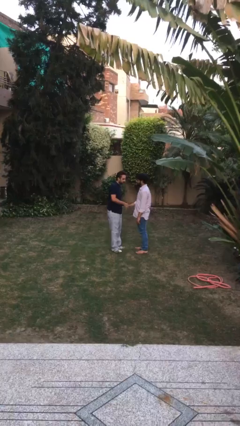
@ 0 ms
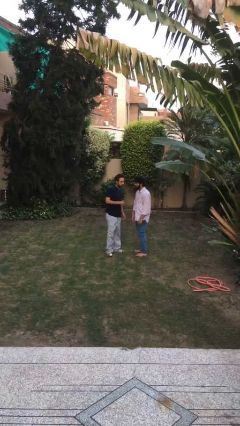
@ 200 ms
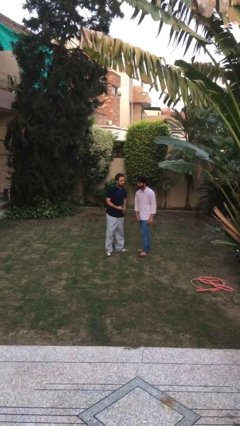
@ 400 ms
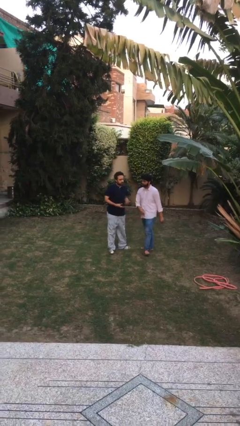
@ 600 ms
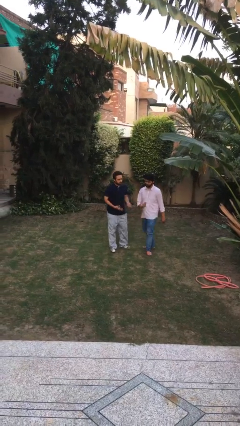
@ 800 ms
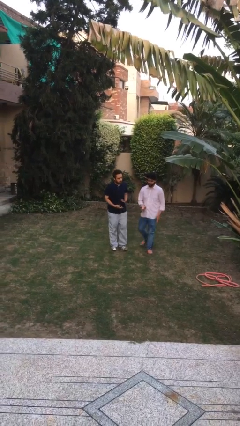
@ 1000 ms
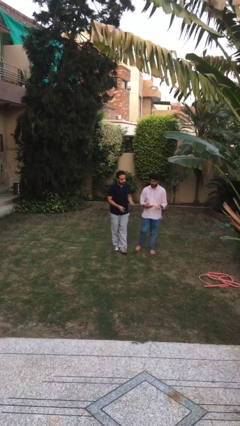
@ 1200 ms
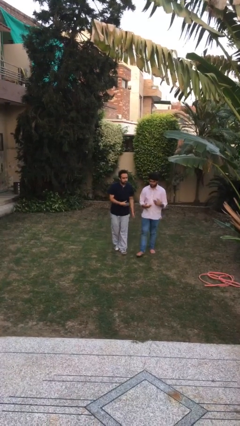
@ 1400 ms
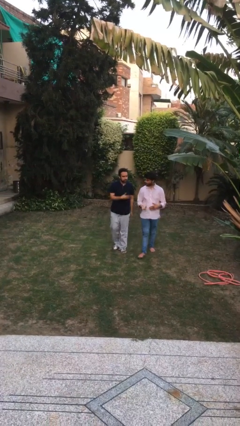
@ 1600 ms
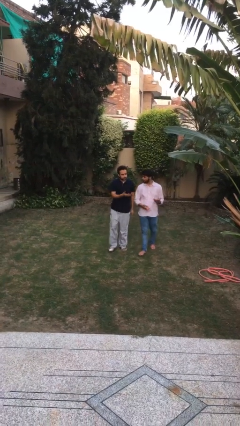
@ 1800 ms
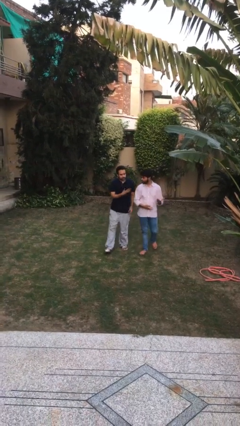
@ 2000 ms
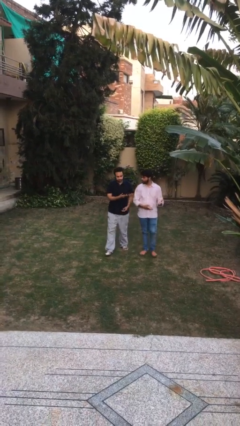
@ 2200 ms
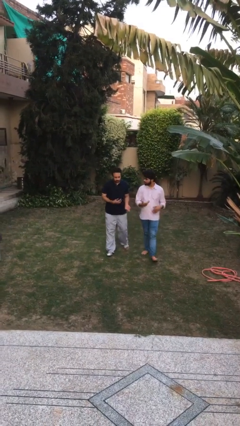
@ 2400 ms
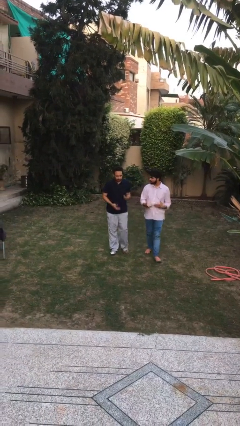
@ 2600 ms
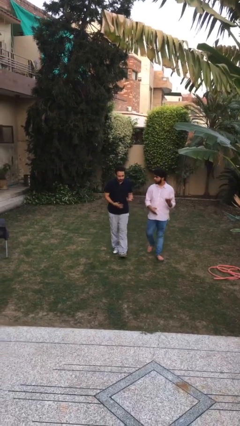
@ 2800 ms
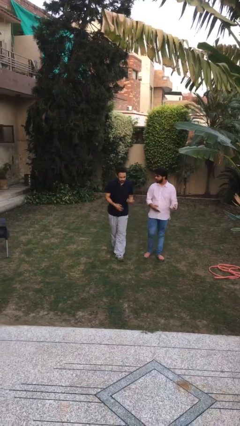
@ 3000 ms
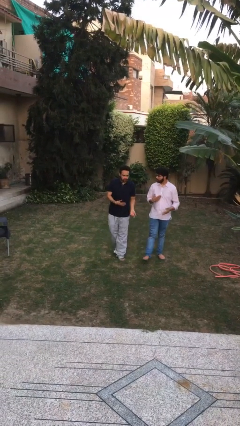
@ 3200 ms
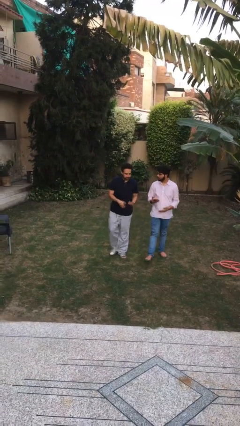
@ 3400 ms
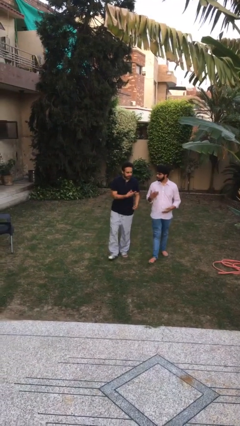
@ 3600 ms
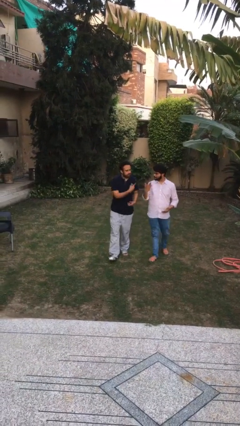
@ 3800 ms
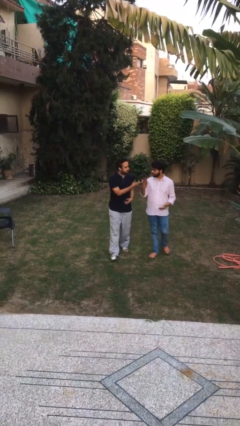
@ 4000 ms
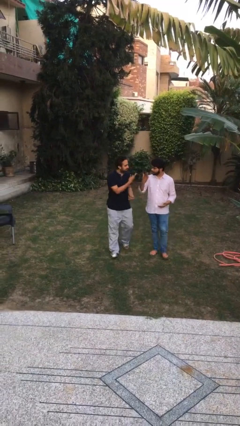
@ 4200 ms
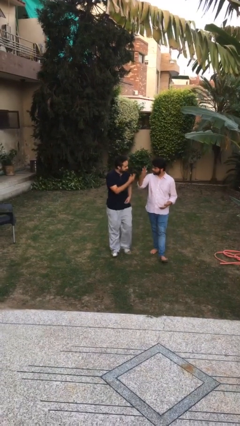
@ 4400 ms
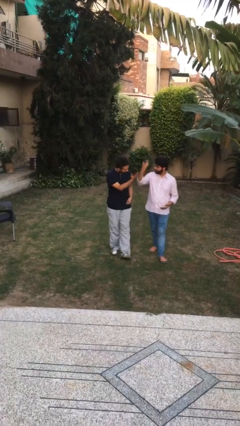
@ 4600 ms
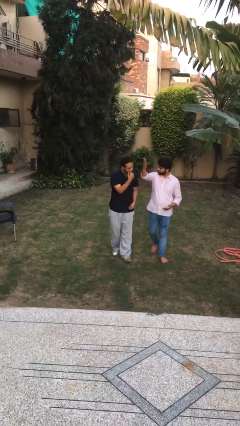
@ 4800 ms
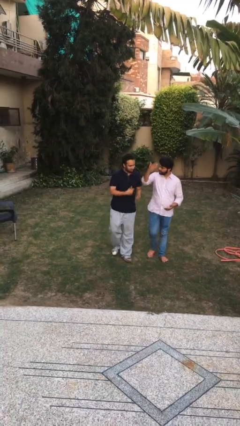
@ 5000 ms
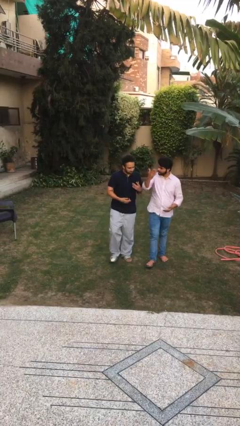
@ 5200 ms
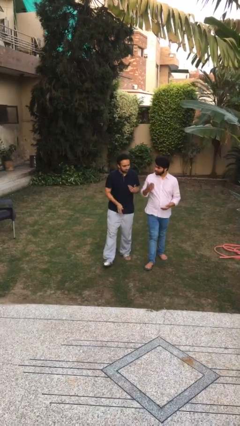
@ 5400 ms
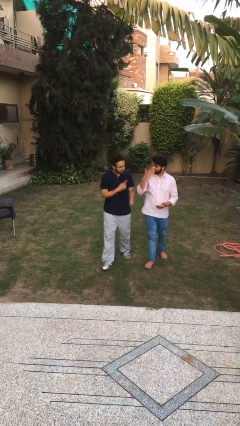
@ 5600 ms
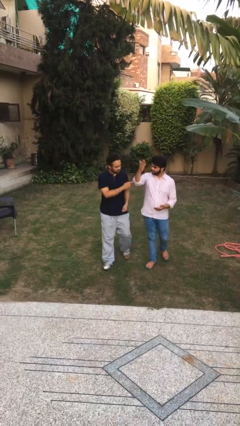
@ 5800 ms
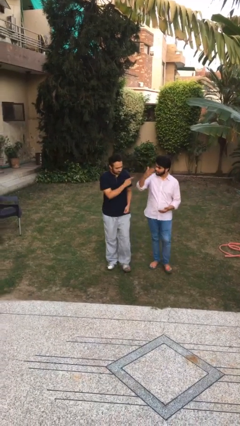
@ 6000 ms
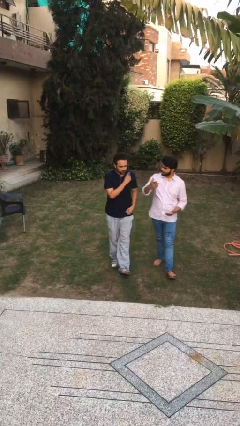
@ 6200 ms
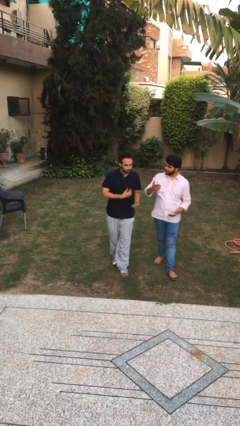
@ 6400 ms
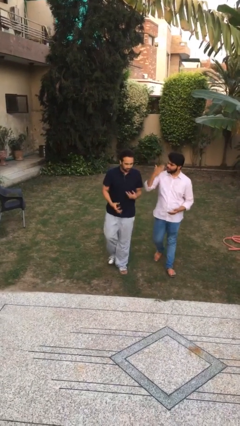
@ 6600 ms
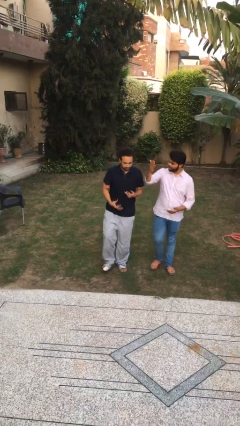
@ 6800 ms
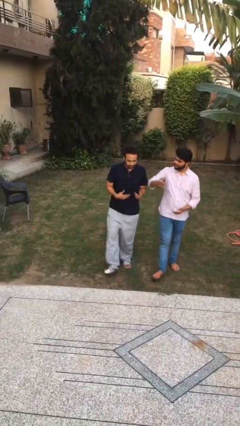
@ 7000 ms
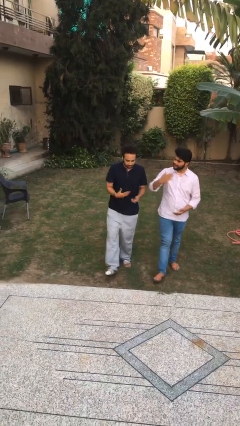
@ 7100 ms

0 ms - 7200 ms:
person talks to person

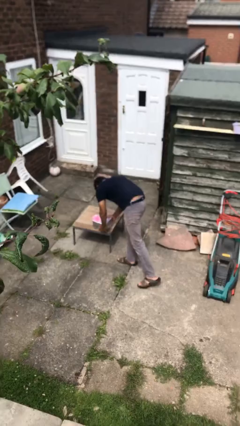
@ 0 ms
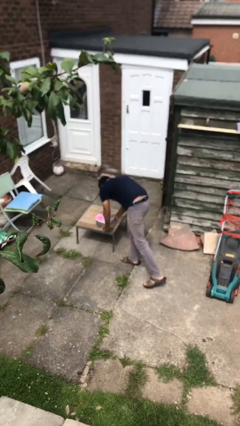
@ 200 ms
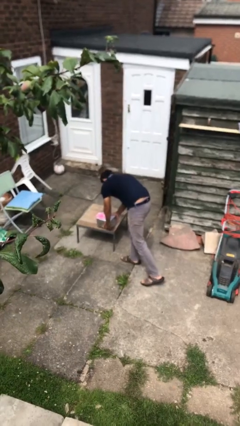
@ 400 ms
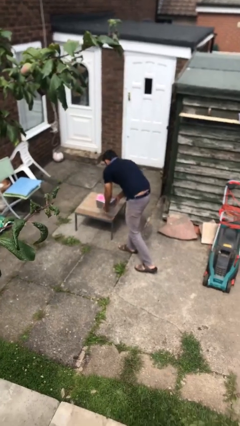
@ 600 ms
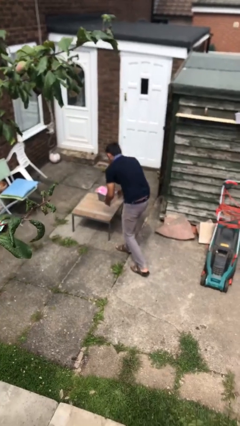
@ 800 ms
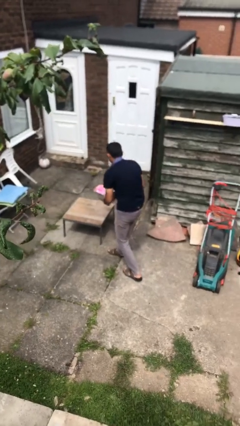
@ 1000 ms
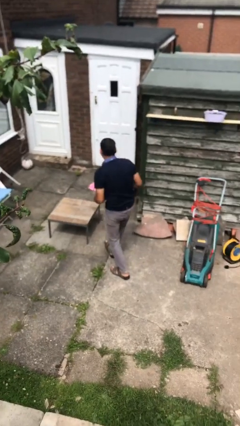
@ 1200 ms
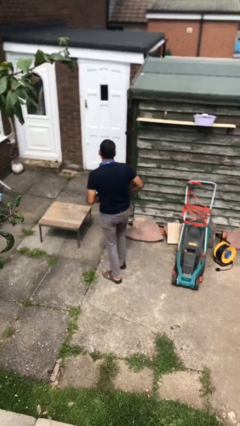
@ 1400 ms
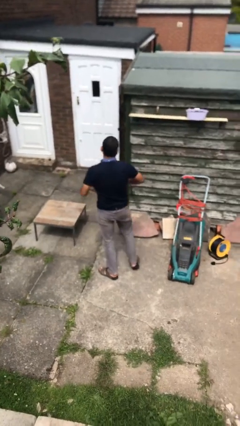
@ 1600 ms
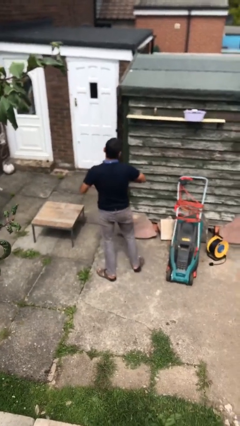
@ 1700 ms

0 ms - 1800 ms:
person picks up object from table

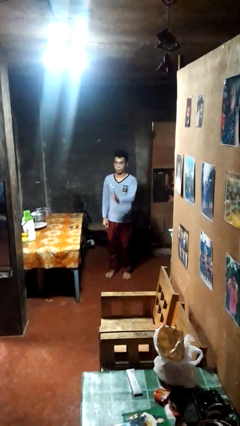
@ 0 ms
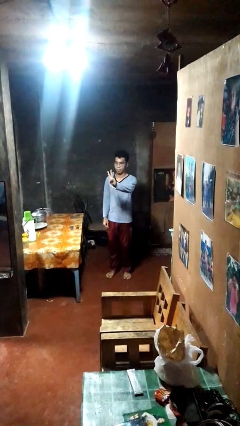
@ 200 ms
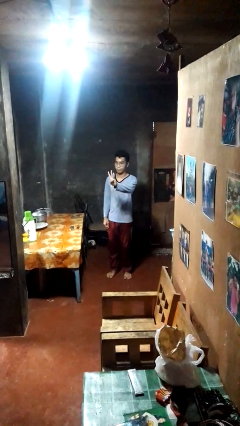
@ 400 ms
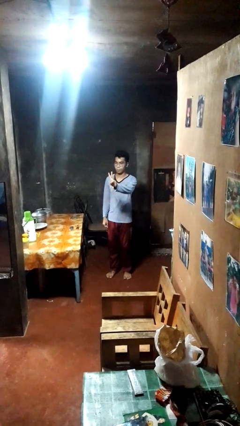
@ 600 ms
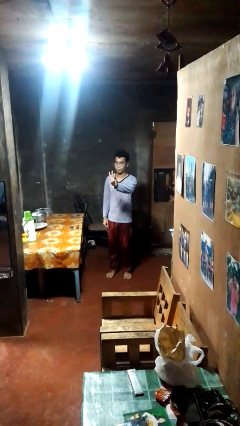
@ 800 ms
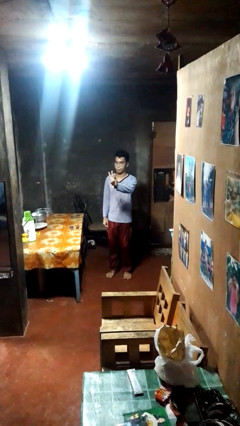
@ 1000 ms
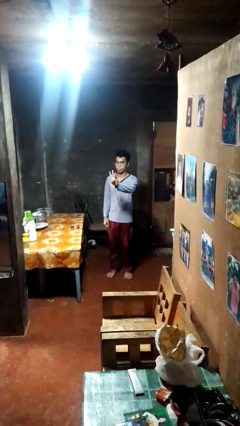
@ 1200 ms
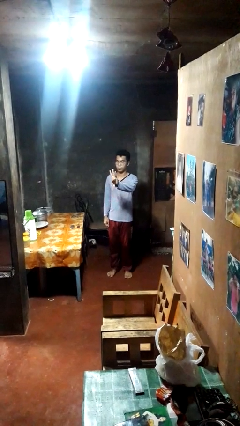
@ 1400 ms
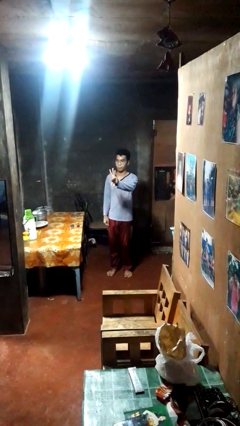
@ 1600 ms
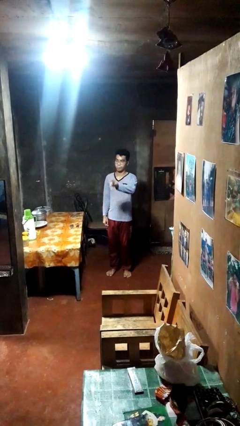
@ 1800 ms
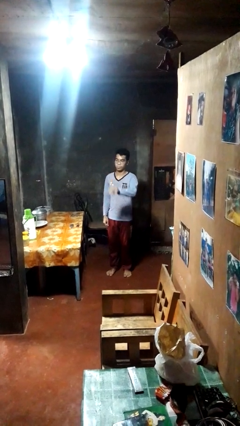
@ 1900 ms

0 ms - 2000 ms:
person gestures number three

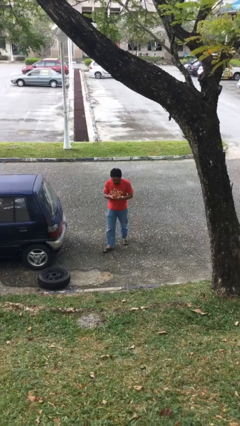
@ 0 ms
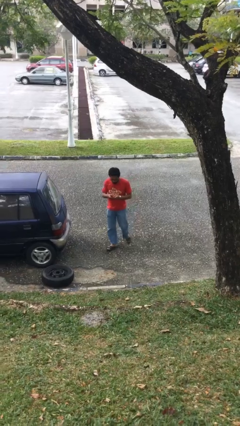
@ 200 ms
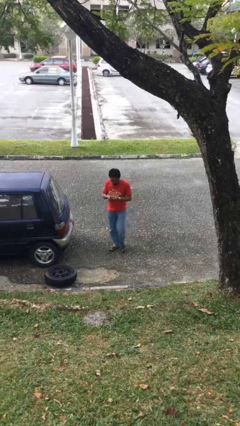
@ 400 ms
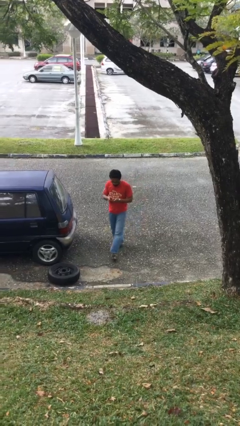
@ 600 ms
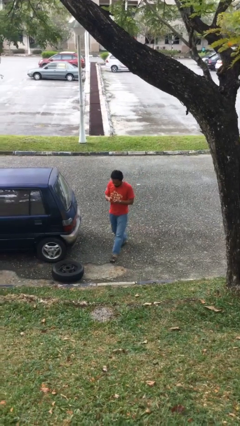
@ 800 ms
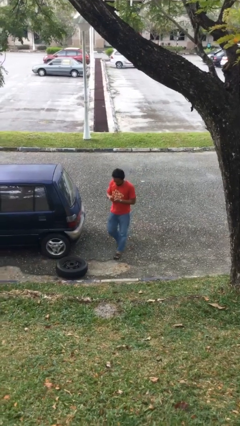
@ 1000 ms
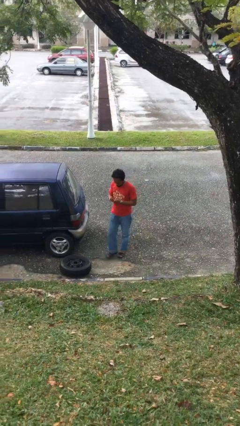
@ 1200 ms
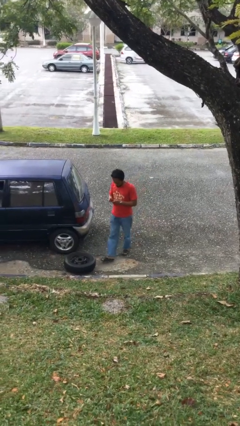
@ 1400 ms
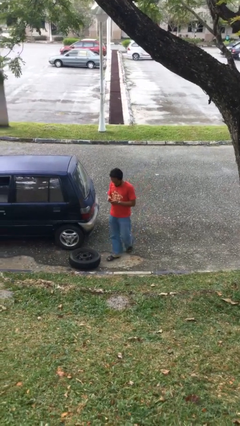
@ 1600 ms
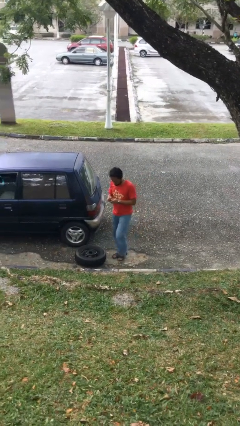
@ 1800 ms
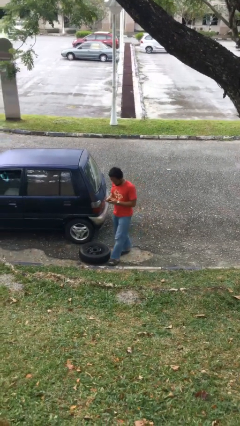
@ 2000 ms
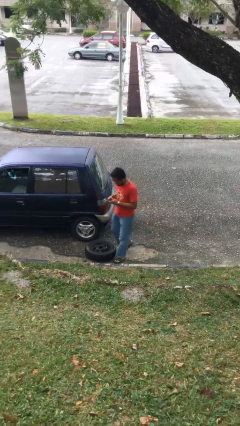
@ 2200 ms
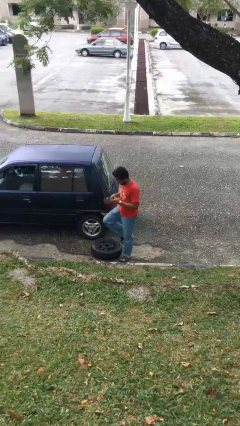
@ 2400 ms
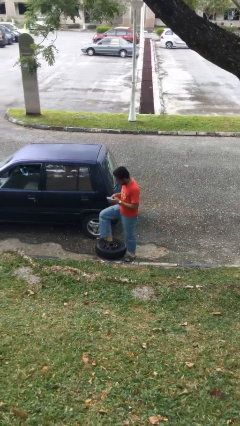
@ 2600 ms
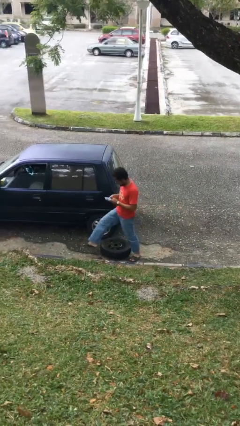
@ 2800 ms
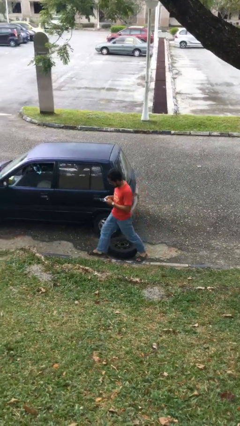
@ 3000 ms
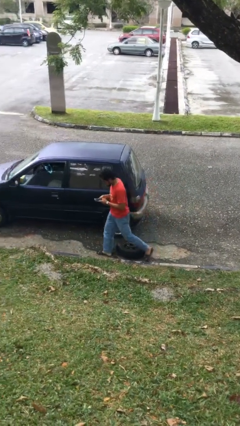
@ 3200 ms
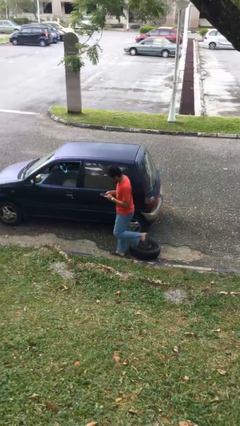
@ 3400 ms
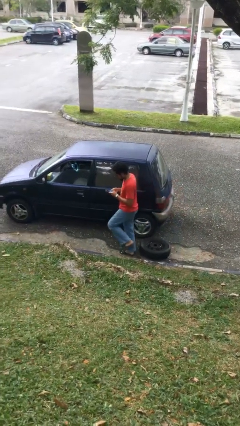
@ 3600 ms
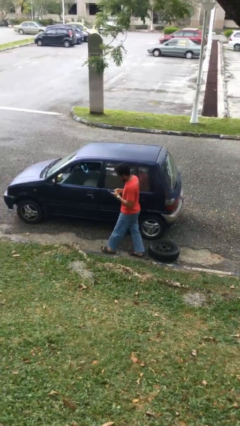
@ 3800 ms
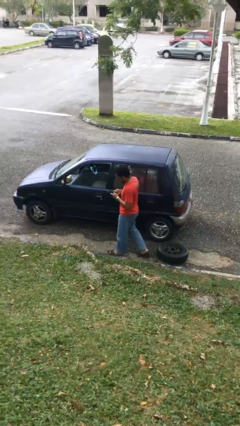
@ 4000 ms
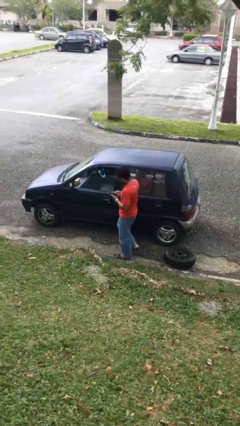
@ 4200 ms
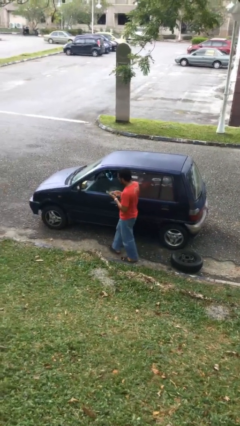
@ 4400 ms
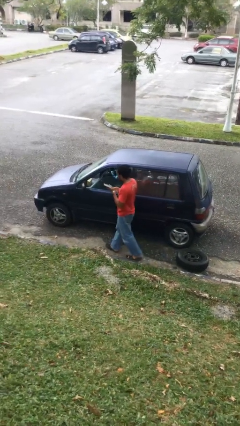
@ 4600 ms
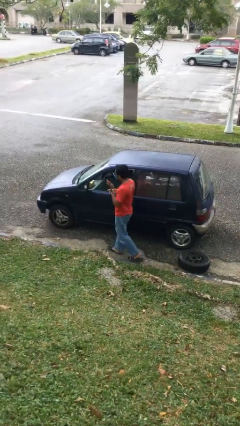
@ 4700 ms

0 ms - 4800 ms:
person texts on phone

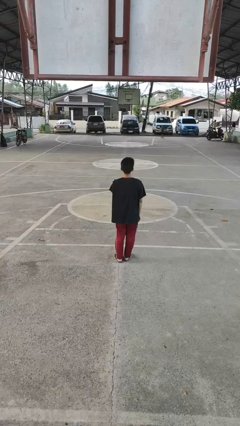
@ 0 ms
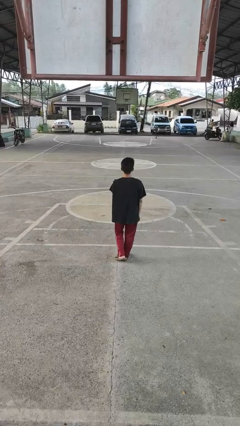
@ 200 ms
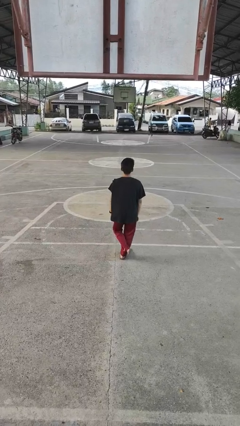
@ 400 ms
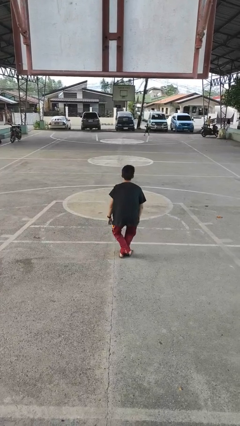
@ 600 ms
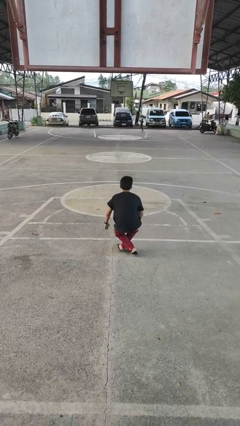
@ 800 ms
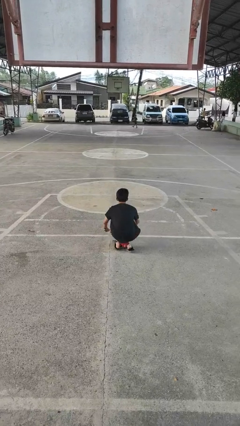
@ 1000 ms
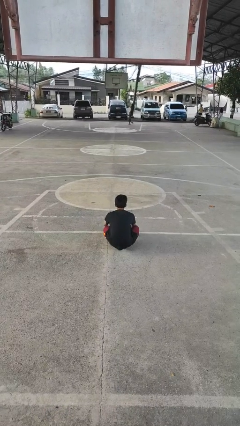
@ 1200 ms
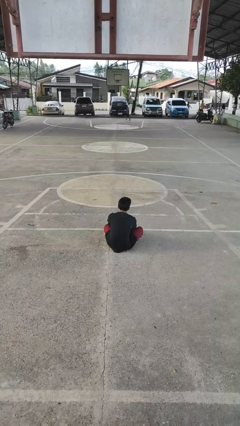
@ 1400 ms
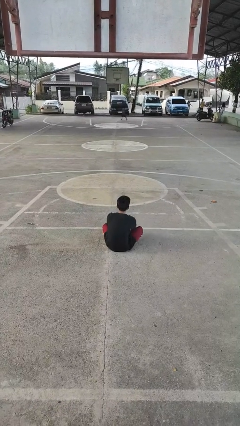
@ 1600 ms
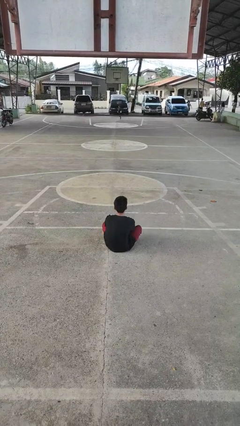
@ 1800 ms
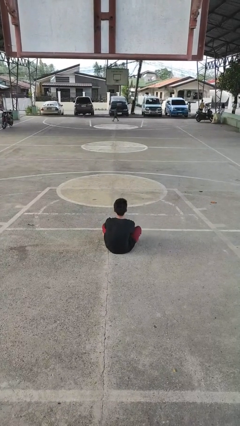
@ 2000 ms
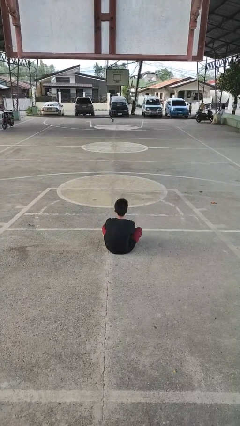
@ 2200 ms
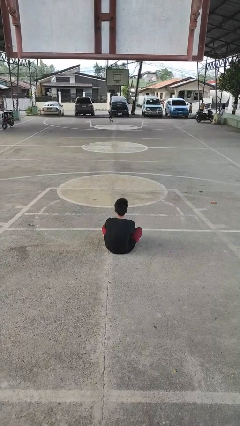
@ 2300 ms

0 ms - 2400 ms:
person sits crisscross
